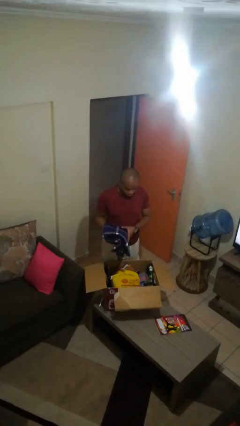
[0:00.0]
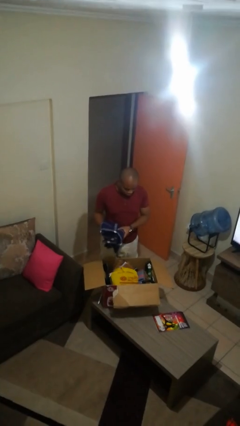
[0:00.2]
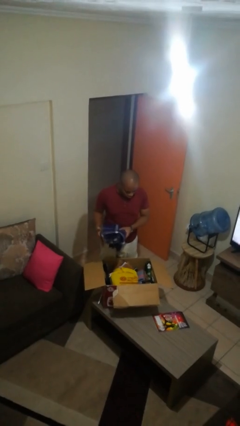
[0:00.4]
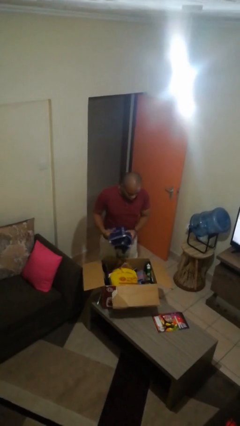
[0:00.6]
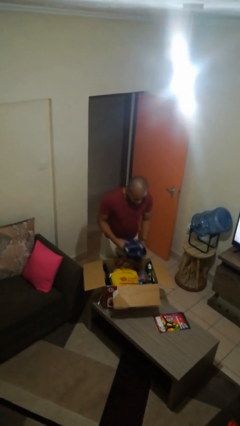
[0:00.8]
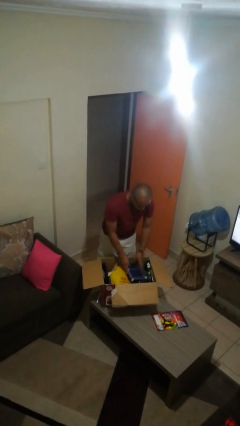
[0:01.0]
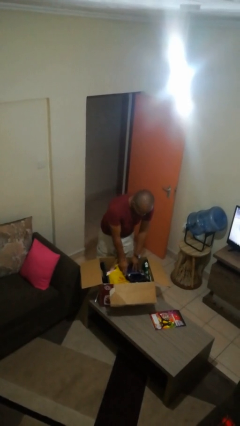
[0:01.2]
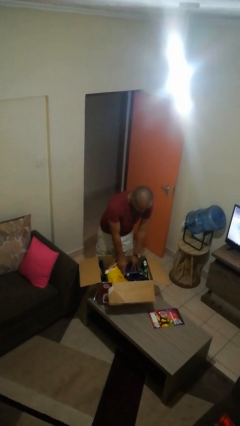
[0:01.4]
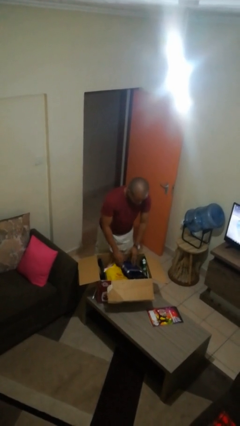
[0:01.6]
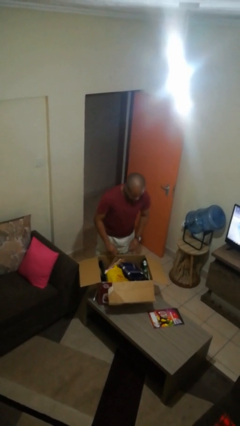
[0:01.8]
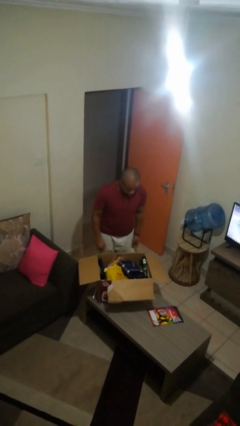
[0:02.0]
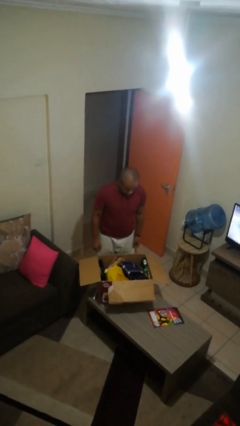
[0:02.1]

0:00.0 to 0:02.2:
person puts object into box

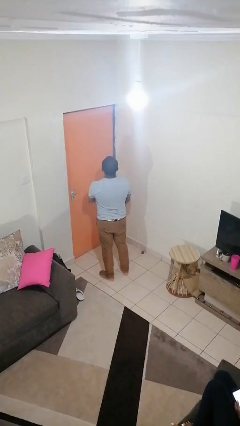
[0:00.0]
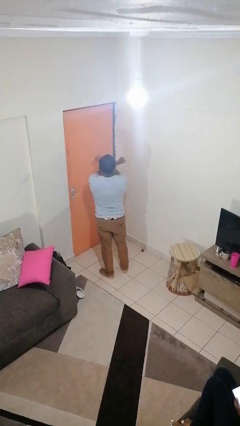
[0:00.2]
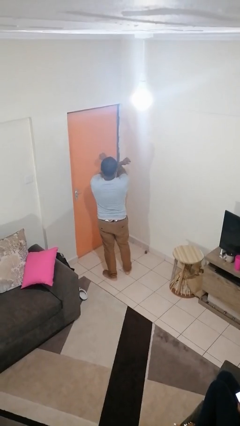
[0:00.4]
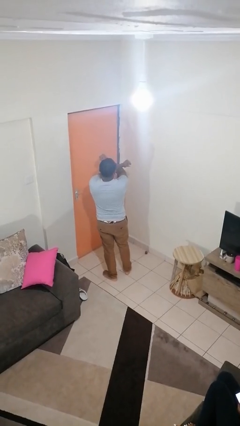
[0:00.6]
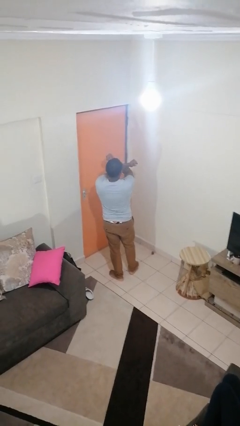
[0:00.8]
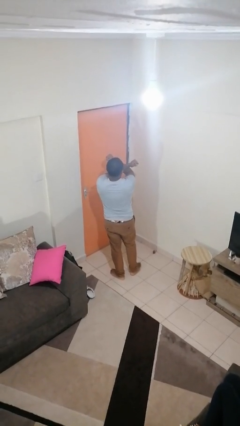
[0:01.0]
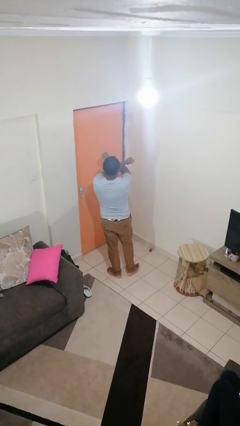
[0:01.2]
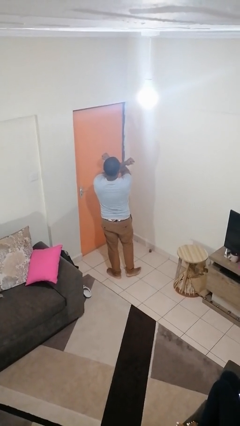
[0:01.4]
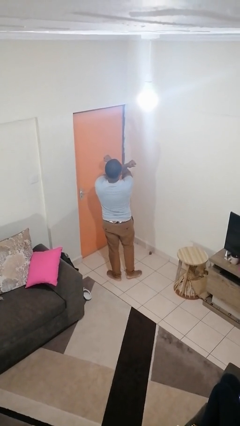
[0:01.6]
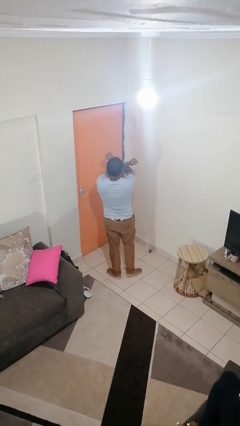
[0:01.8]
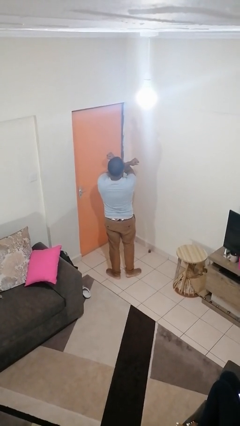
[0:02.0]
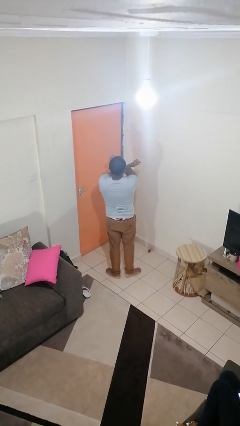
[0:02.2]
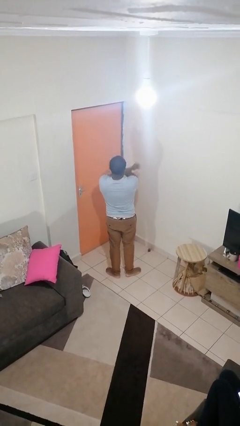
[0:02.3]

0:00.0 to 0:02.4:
person gestures arms x

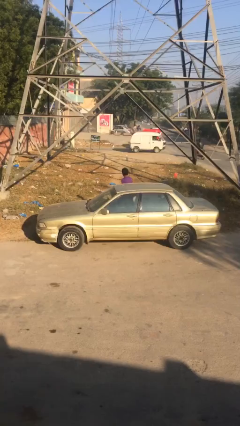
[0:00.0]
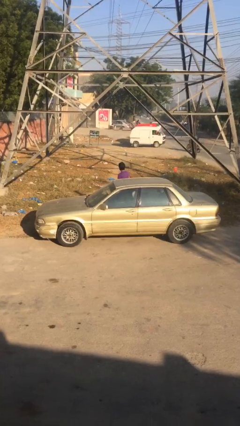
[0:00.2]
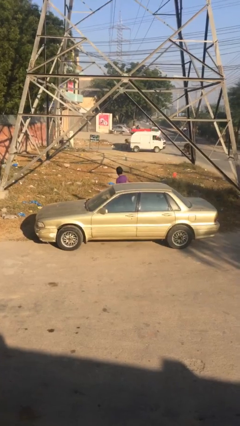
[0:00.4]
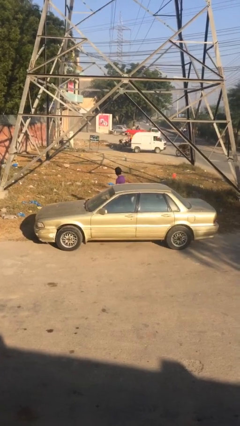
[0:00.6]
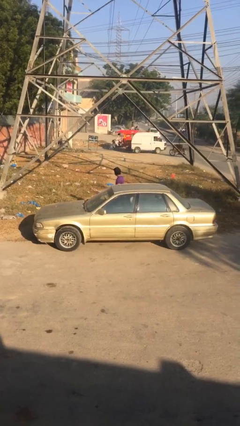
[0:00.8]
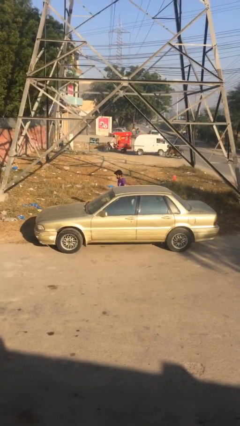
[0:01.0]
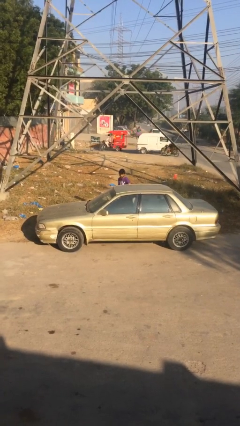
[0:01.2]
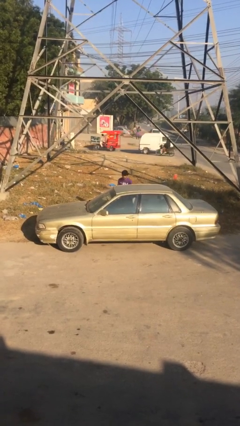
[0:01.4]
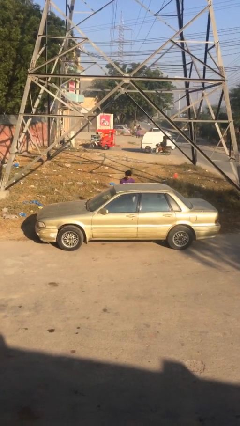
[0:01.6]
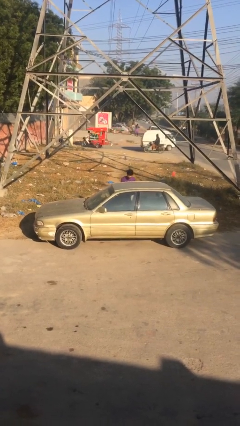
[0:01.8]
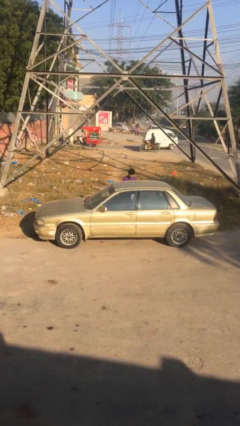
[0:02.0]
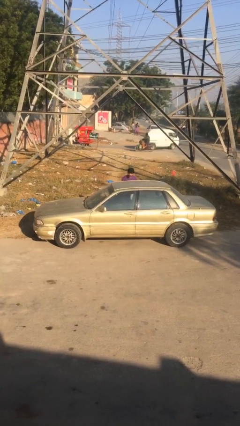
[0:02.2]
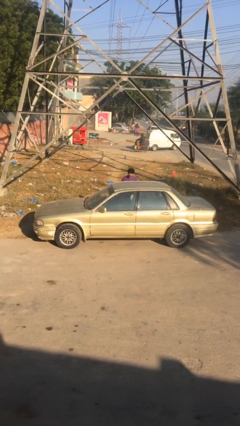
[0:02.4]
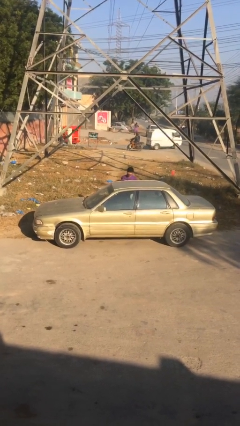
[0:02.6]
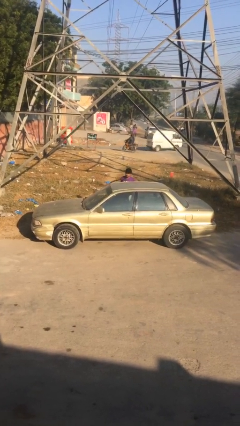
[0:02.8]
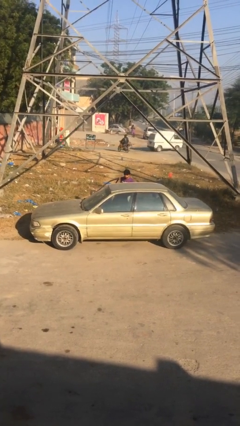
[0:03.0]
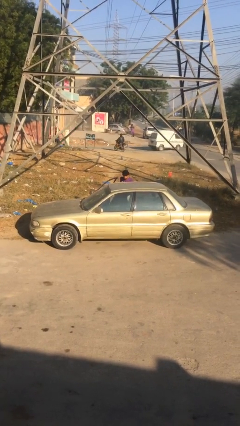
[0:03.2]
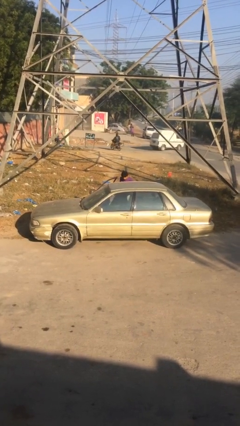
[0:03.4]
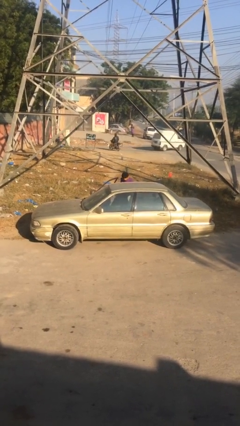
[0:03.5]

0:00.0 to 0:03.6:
person opens car door

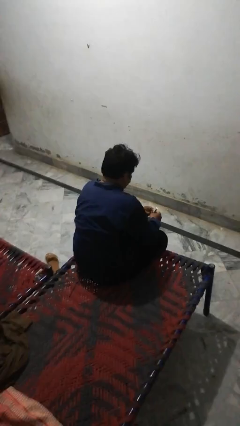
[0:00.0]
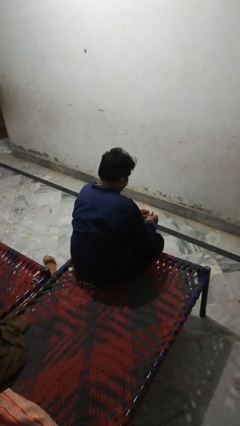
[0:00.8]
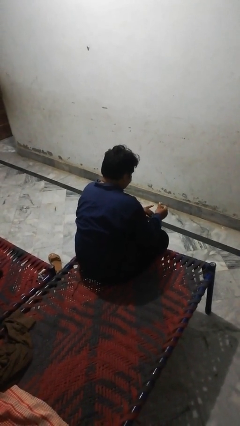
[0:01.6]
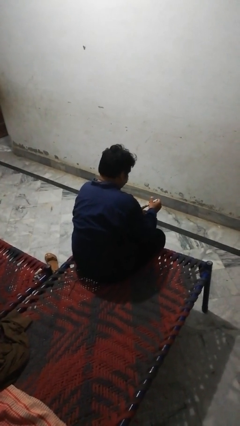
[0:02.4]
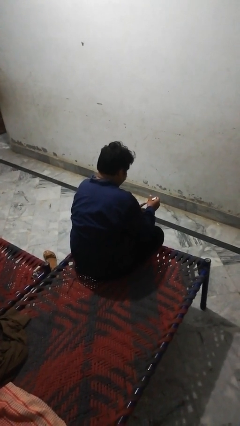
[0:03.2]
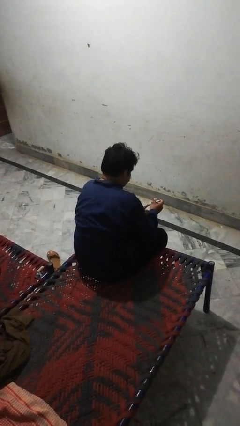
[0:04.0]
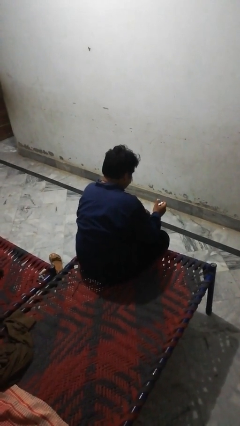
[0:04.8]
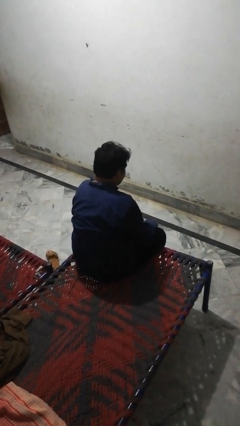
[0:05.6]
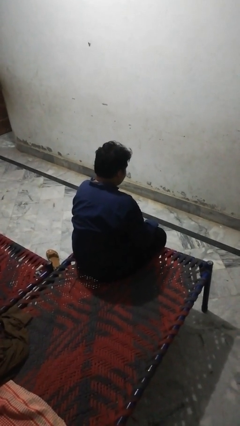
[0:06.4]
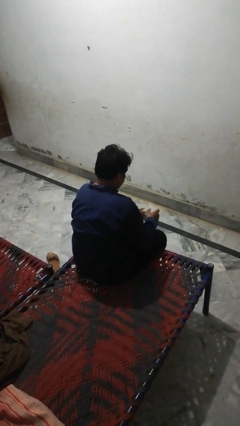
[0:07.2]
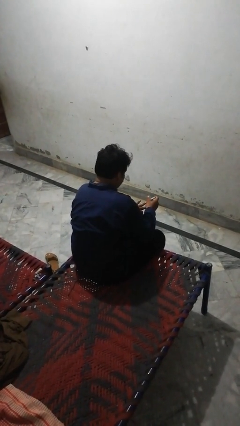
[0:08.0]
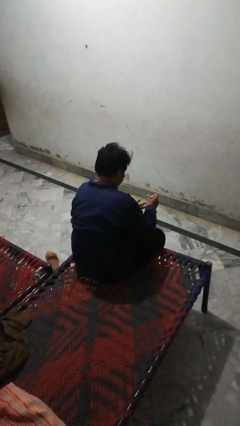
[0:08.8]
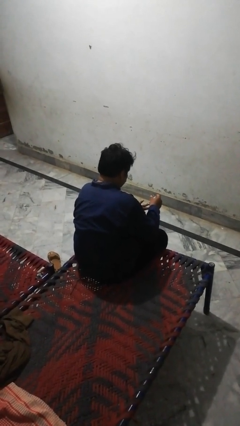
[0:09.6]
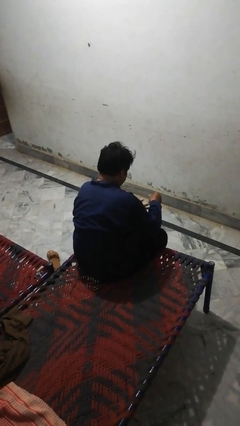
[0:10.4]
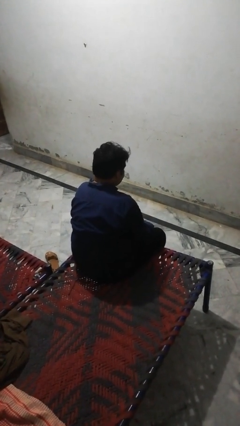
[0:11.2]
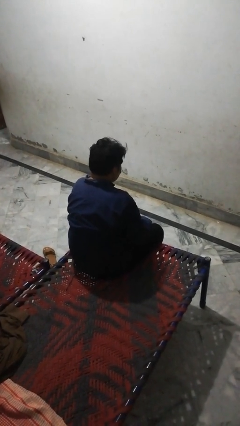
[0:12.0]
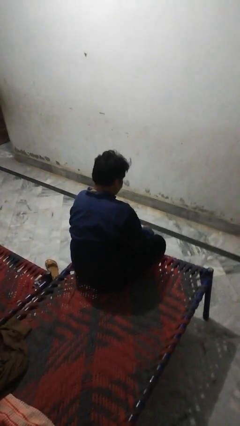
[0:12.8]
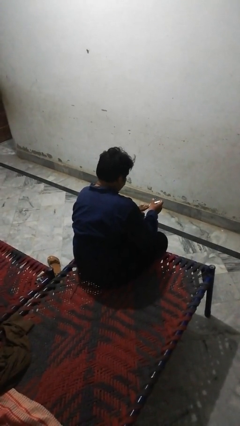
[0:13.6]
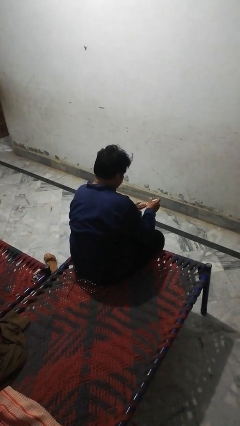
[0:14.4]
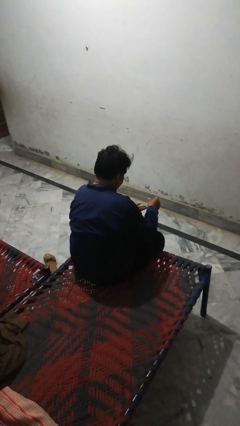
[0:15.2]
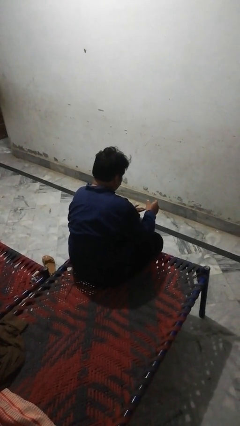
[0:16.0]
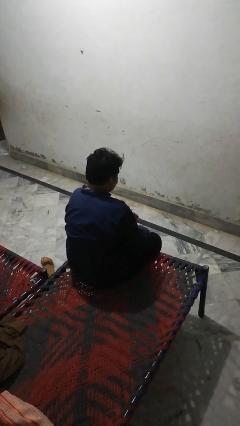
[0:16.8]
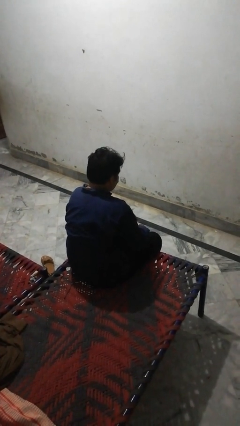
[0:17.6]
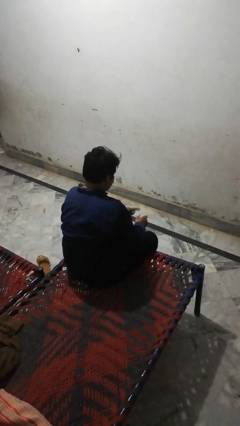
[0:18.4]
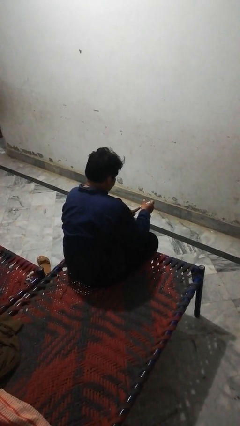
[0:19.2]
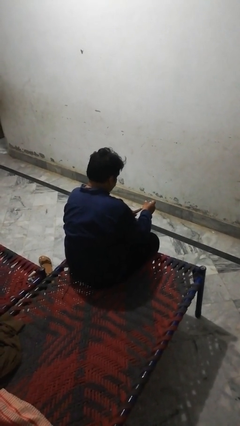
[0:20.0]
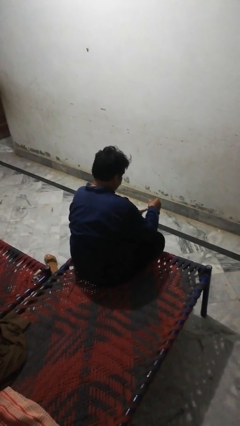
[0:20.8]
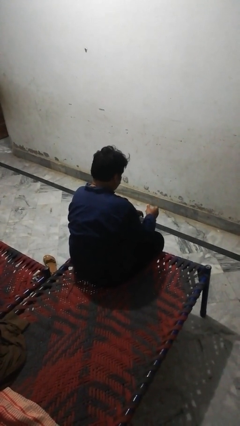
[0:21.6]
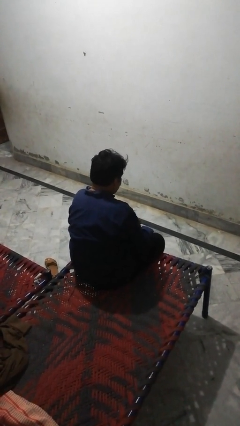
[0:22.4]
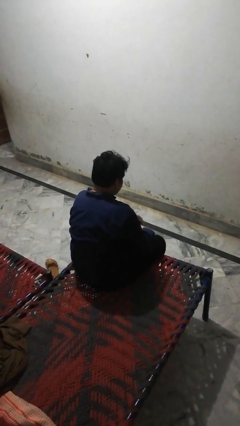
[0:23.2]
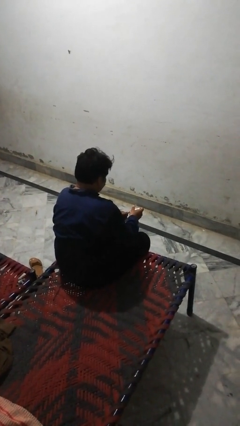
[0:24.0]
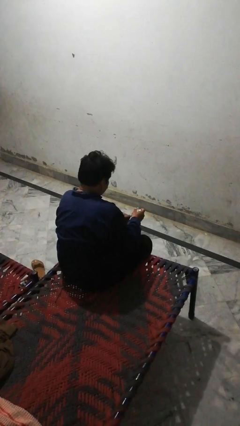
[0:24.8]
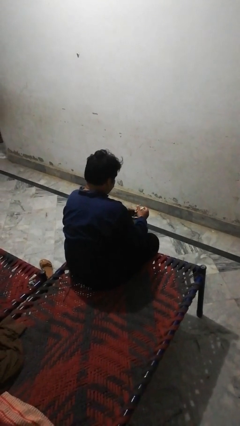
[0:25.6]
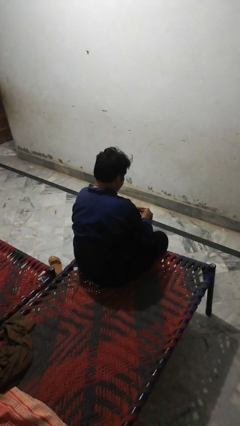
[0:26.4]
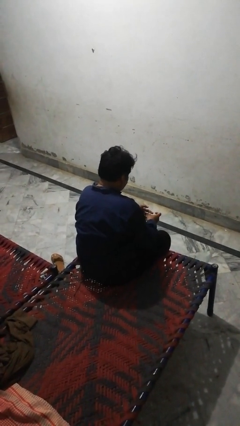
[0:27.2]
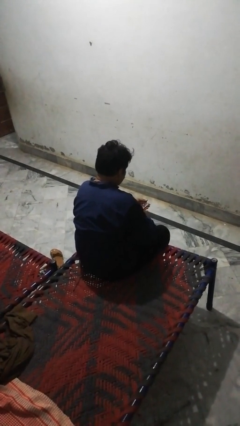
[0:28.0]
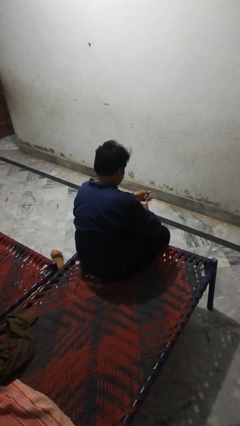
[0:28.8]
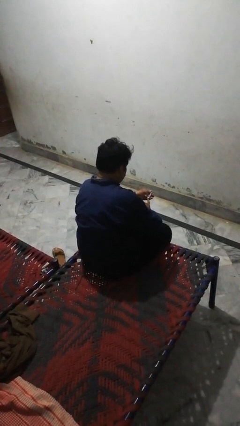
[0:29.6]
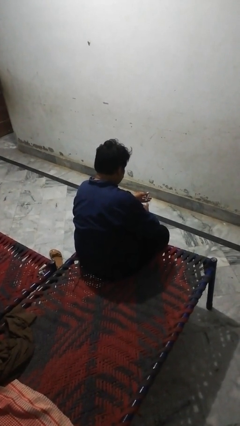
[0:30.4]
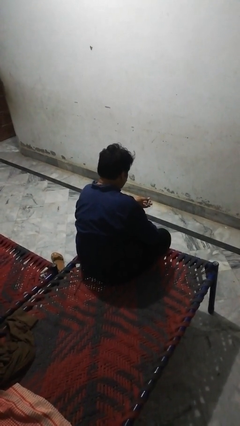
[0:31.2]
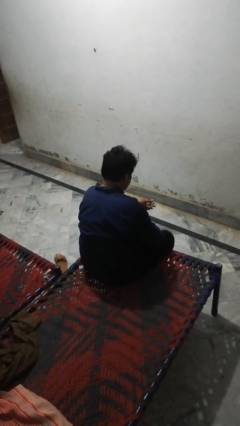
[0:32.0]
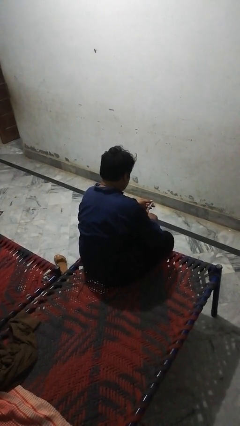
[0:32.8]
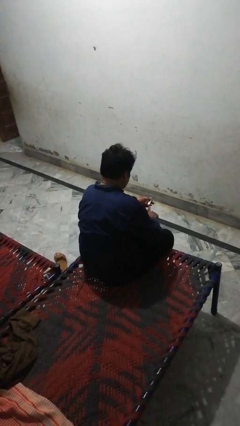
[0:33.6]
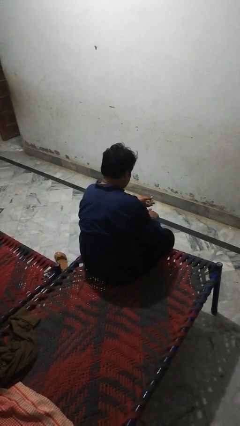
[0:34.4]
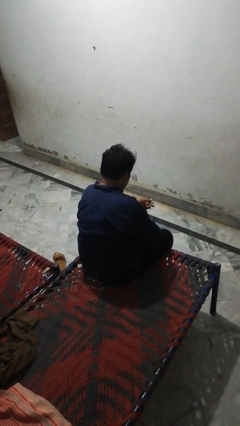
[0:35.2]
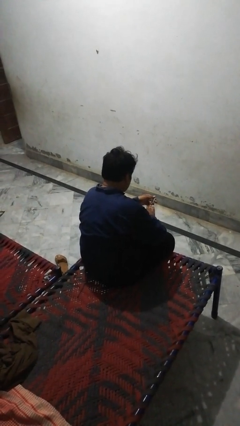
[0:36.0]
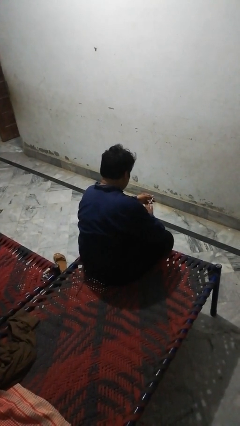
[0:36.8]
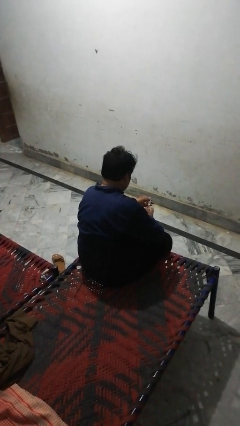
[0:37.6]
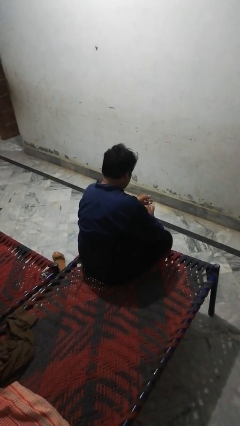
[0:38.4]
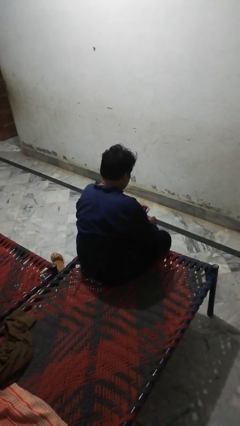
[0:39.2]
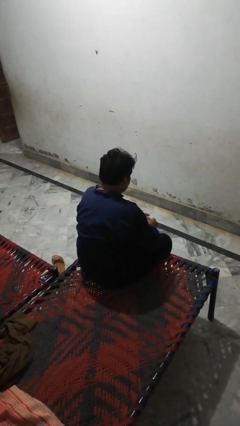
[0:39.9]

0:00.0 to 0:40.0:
person clips fingernails
